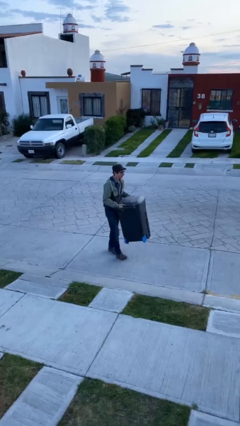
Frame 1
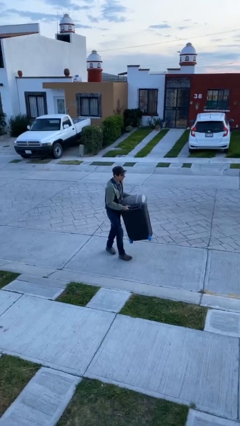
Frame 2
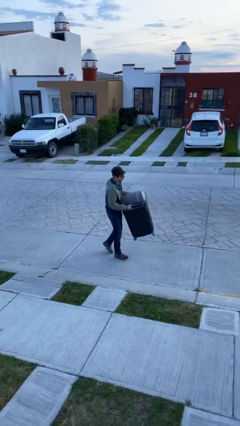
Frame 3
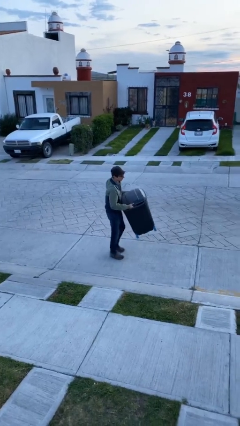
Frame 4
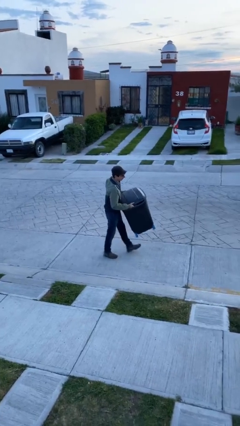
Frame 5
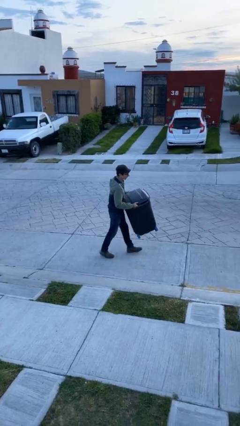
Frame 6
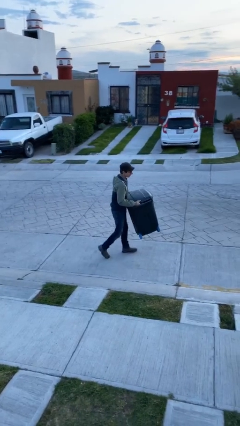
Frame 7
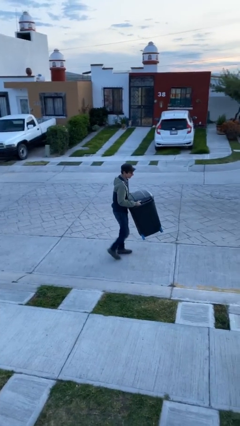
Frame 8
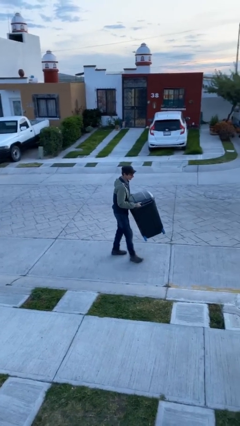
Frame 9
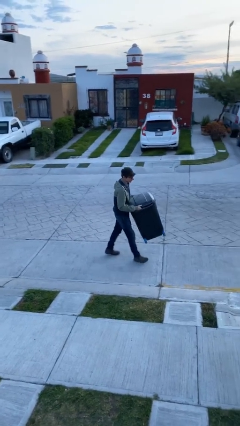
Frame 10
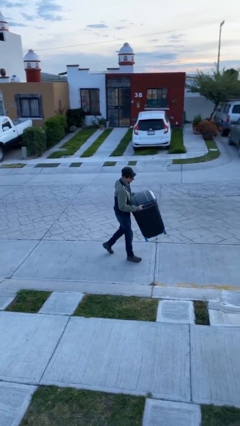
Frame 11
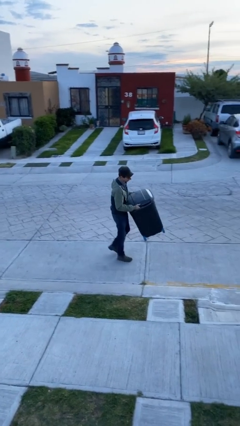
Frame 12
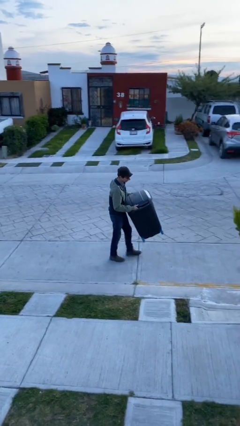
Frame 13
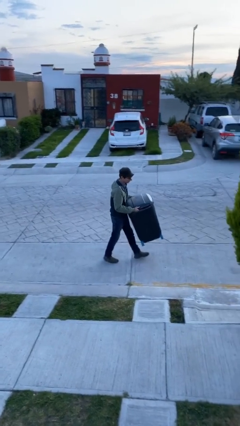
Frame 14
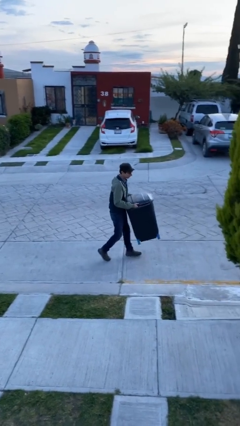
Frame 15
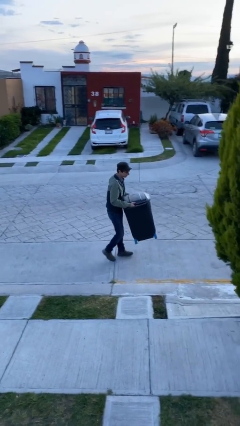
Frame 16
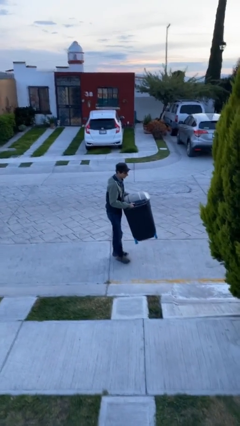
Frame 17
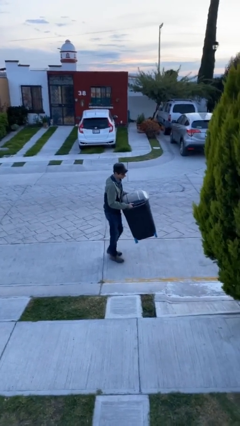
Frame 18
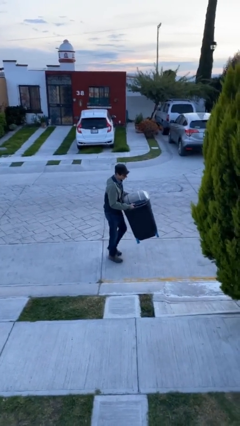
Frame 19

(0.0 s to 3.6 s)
person carries heavy object

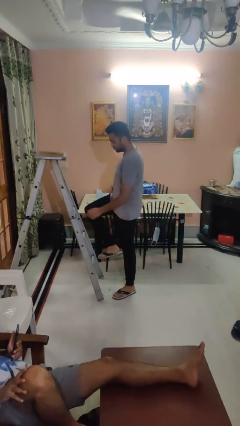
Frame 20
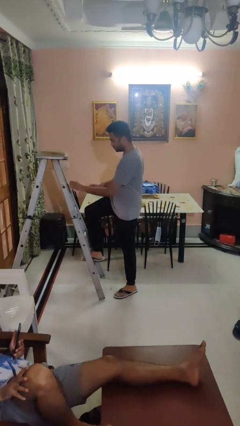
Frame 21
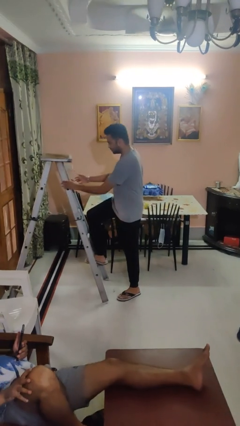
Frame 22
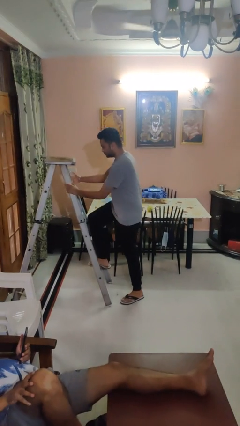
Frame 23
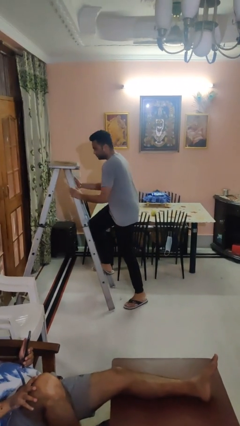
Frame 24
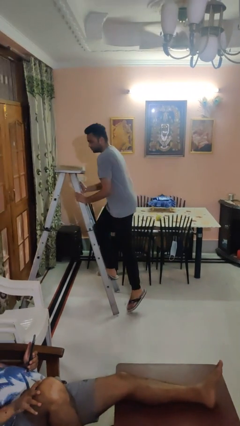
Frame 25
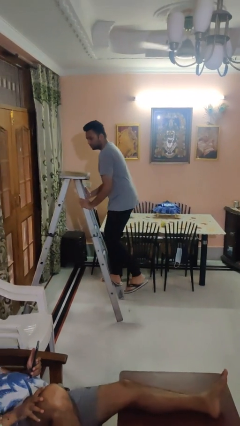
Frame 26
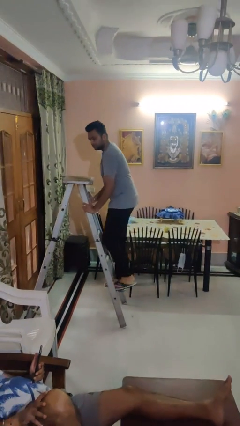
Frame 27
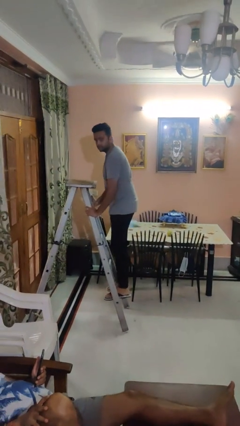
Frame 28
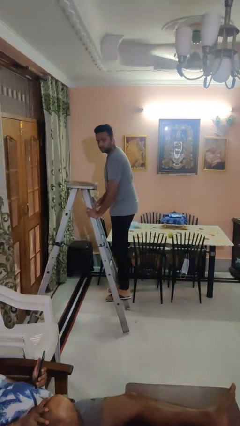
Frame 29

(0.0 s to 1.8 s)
person climbs up ladder

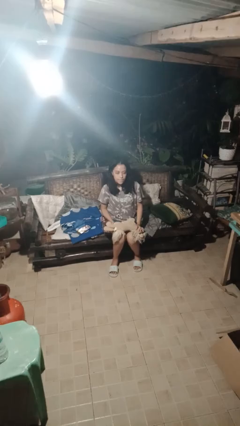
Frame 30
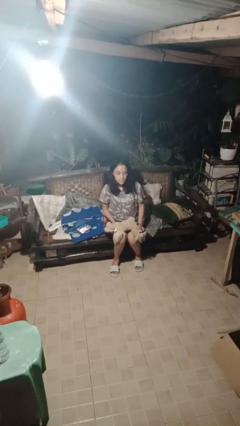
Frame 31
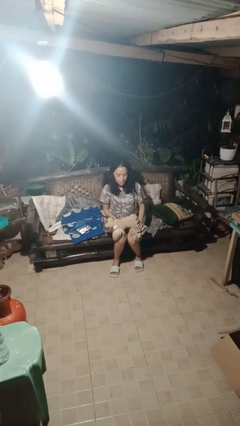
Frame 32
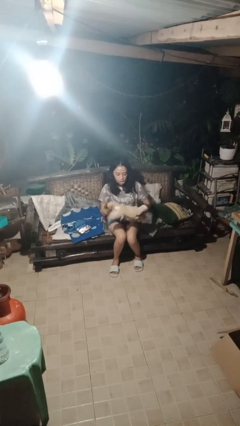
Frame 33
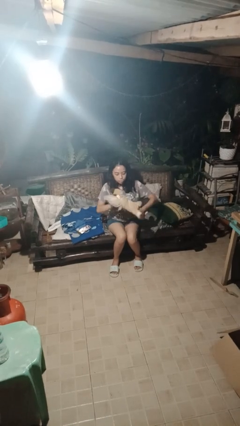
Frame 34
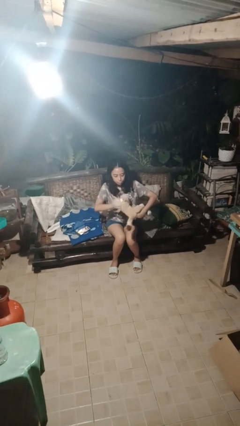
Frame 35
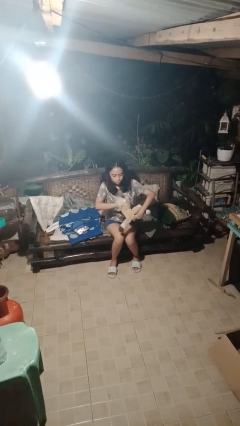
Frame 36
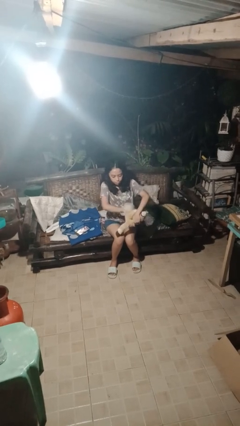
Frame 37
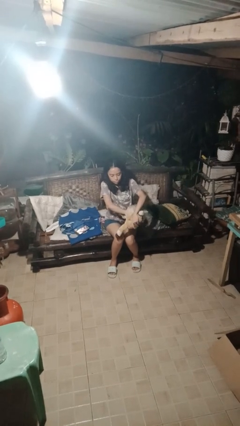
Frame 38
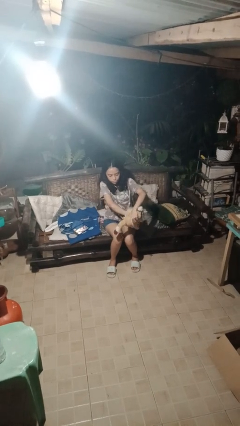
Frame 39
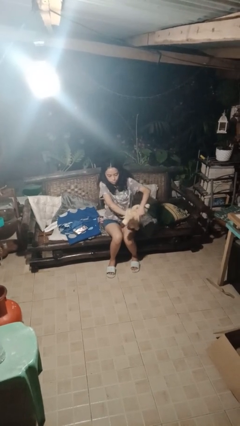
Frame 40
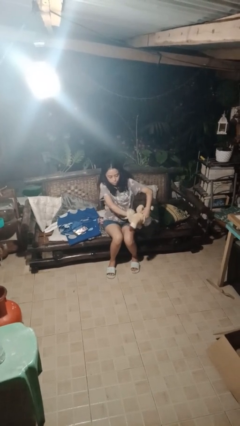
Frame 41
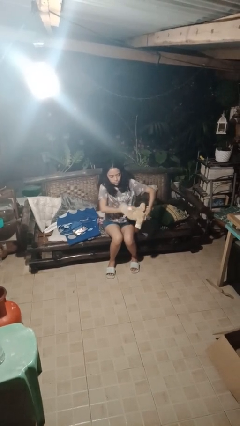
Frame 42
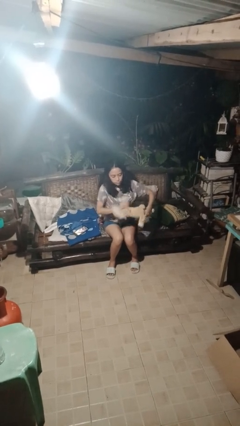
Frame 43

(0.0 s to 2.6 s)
person squeezes object

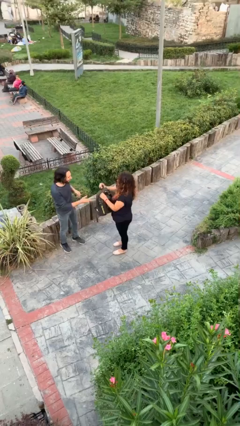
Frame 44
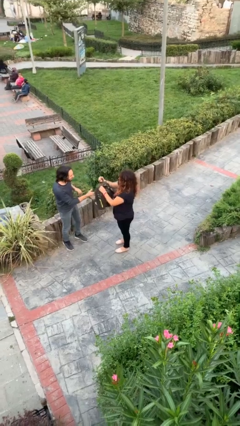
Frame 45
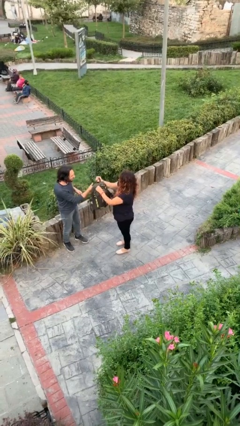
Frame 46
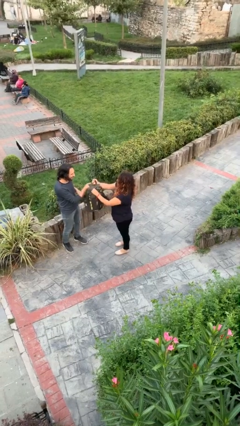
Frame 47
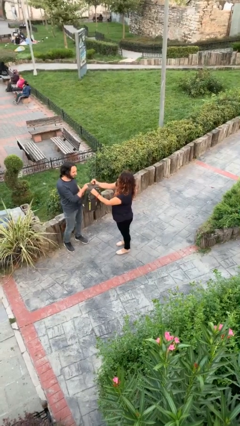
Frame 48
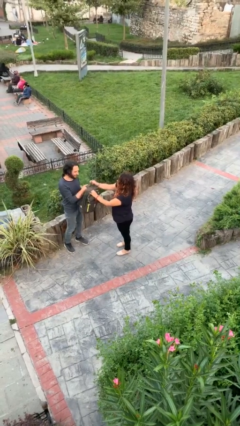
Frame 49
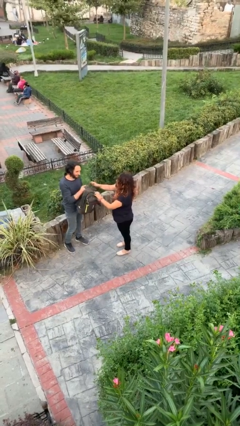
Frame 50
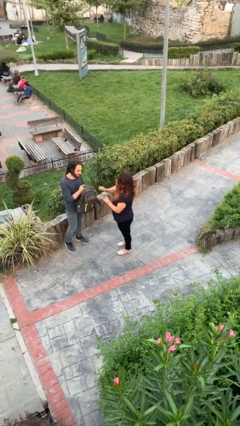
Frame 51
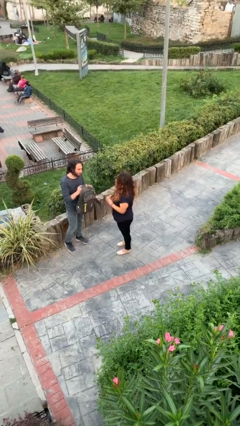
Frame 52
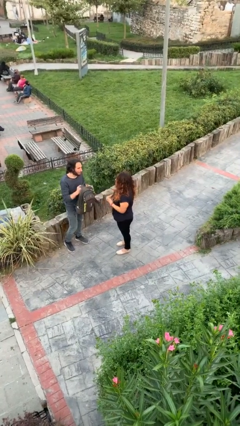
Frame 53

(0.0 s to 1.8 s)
person transfers object to person

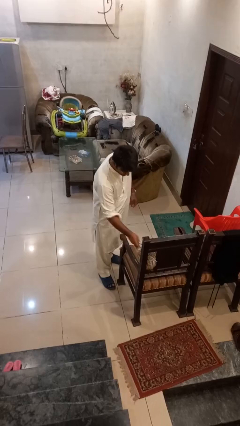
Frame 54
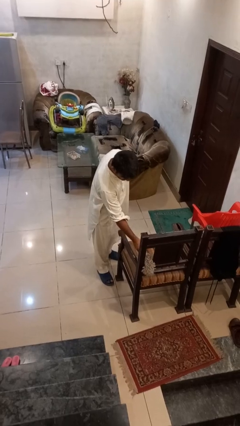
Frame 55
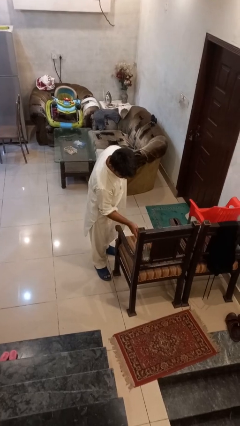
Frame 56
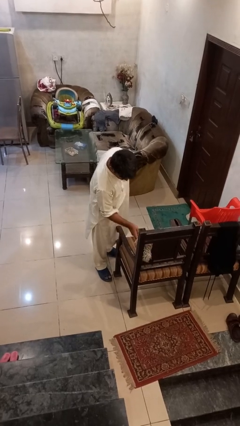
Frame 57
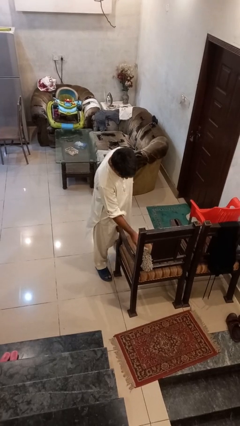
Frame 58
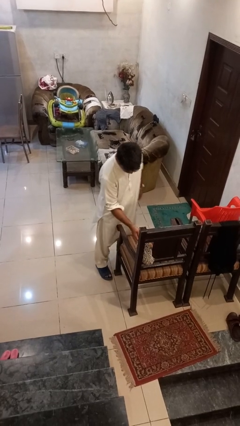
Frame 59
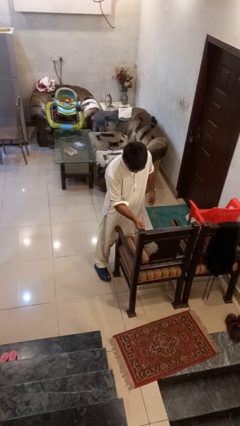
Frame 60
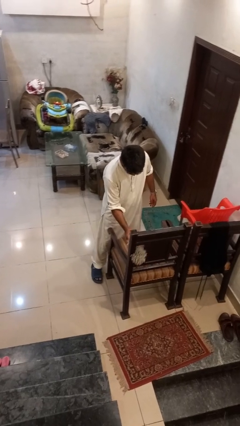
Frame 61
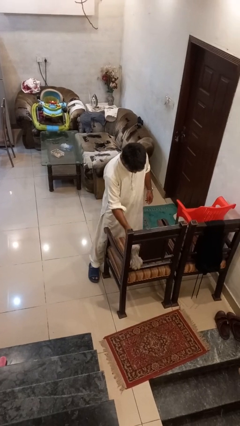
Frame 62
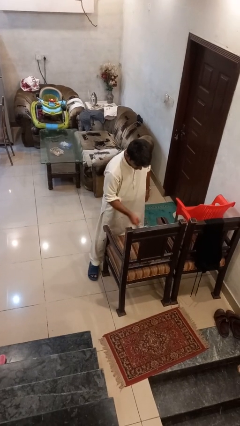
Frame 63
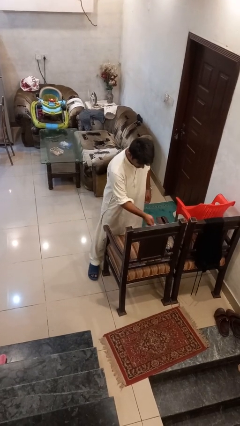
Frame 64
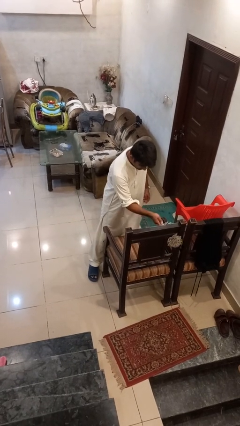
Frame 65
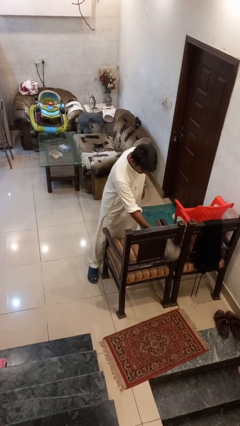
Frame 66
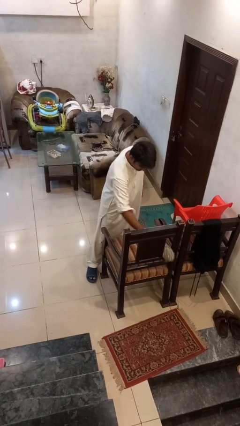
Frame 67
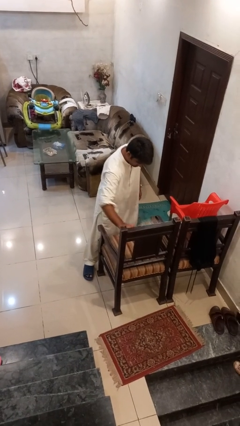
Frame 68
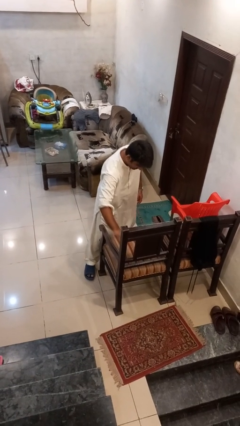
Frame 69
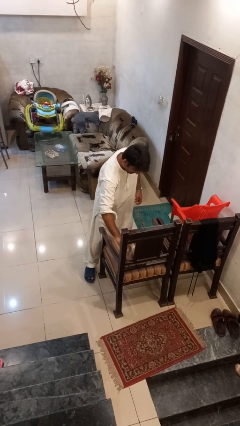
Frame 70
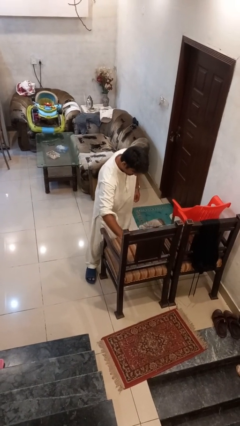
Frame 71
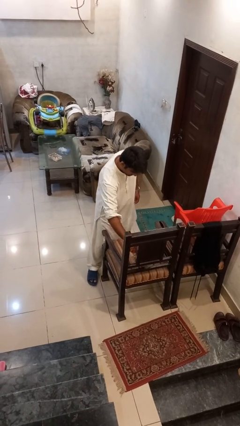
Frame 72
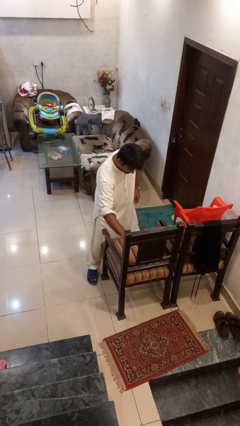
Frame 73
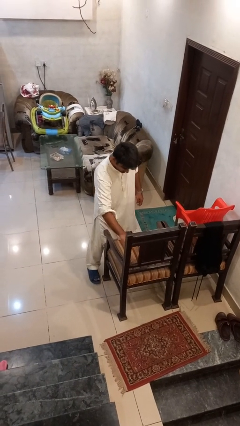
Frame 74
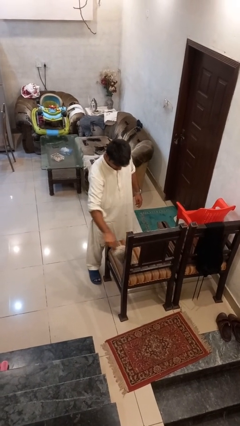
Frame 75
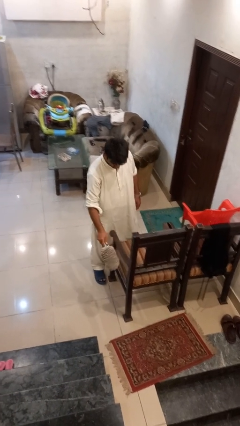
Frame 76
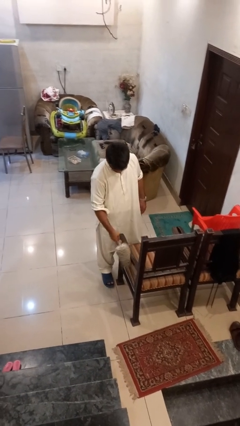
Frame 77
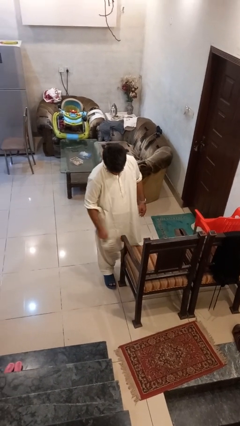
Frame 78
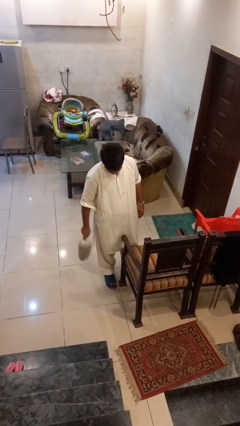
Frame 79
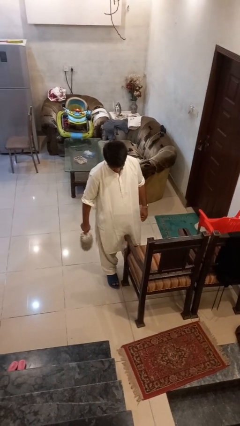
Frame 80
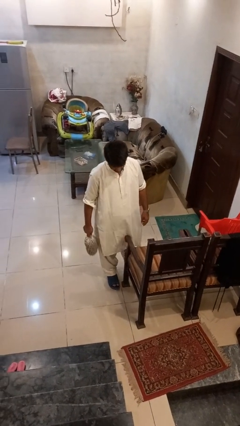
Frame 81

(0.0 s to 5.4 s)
person dusts furniture

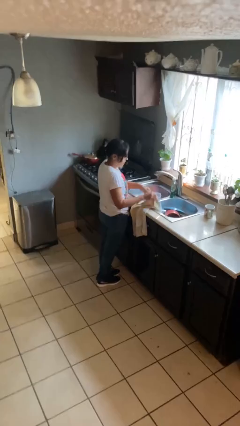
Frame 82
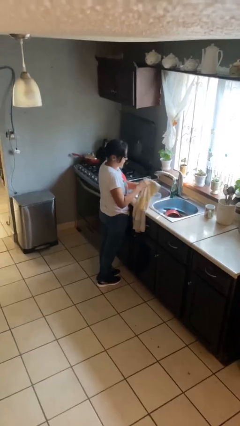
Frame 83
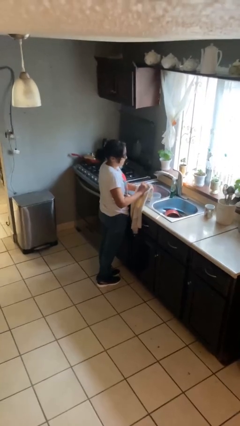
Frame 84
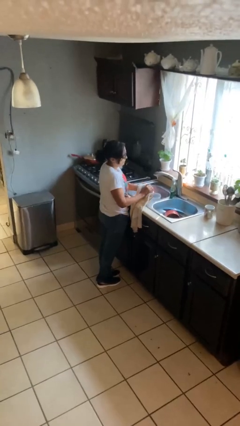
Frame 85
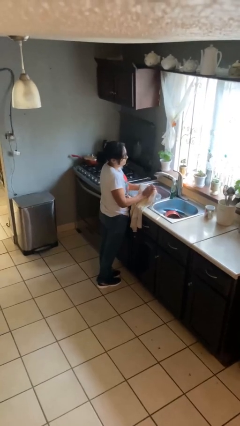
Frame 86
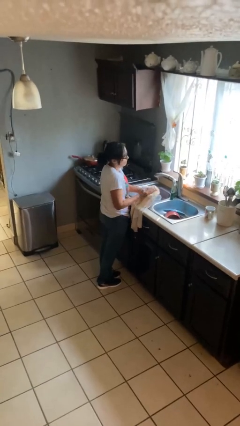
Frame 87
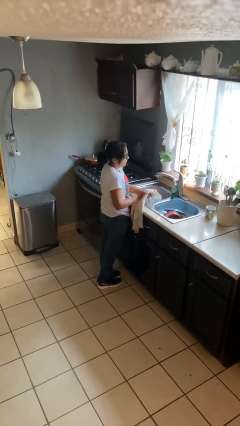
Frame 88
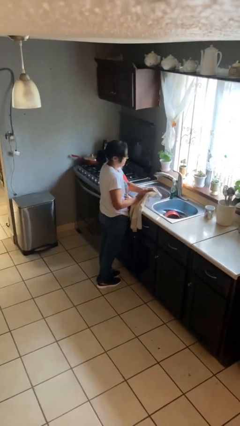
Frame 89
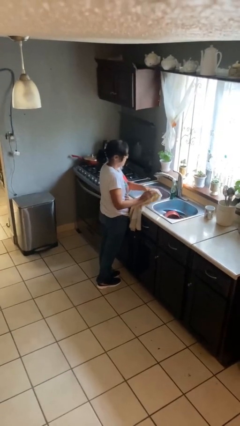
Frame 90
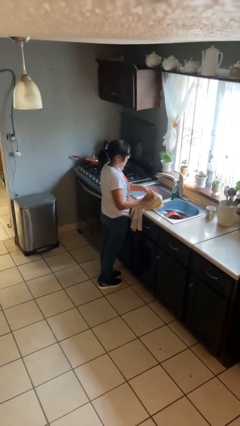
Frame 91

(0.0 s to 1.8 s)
person dries hands with towel

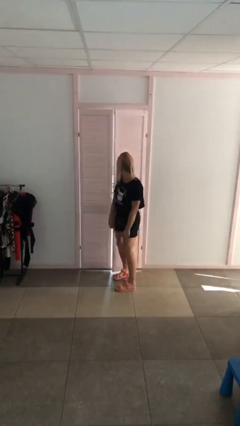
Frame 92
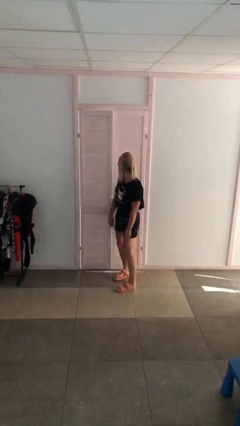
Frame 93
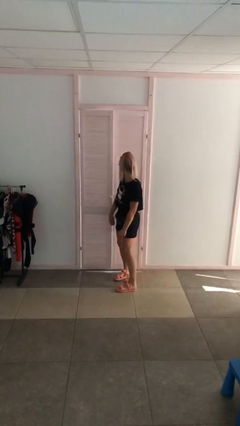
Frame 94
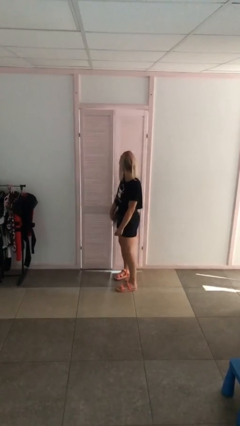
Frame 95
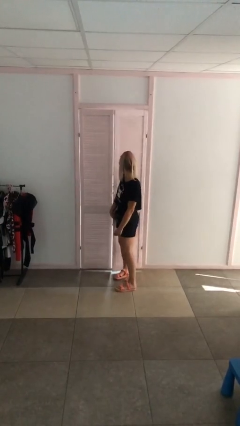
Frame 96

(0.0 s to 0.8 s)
person closes door with hip
